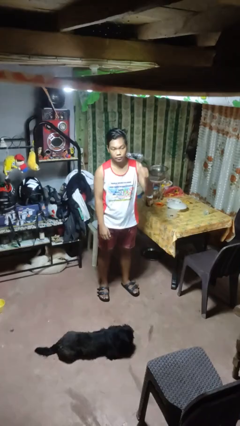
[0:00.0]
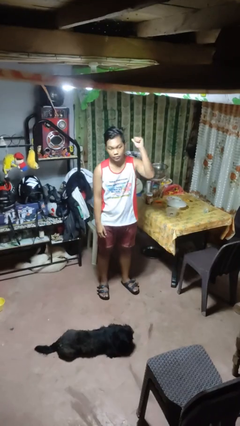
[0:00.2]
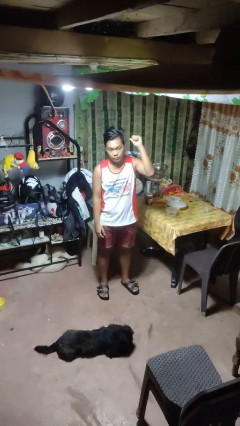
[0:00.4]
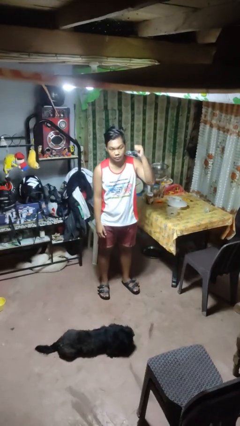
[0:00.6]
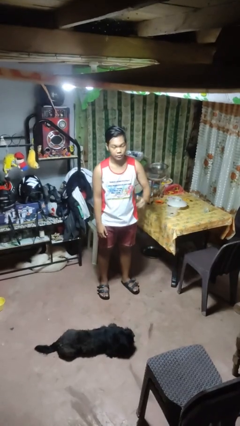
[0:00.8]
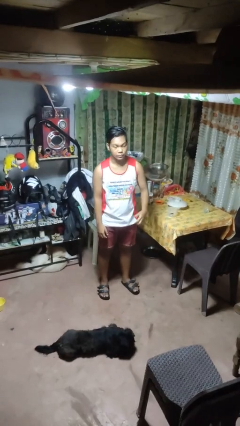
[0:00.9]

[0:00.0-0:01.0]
person gestures behind me

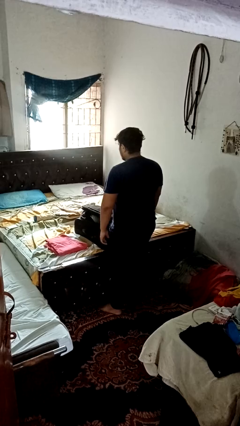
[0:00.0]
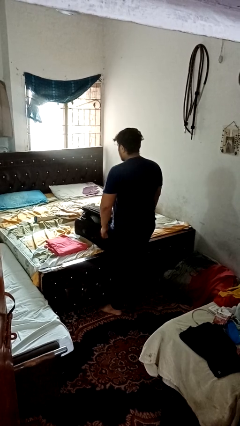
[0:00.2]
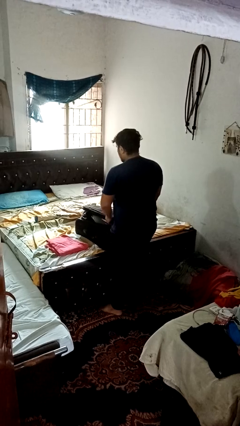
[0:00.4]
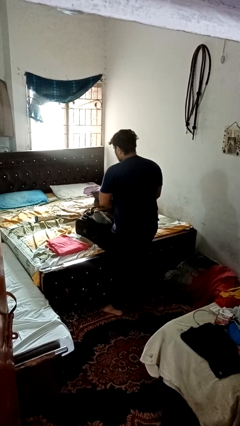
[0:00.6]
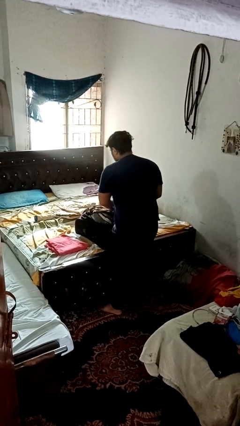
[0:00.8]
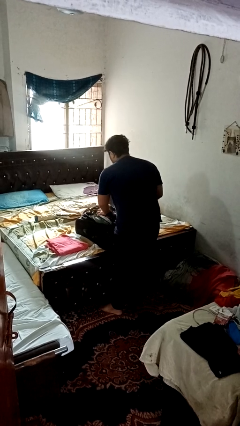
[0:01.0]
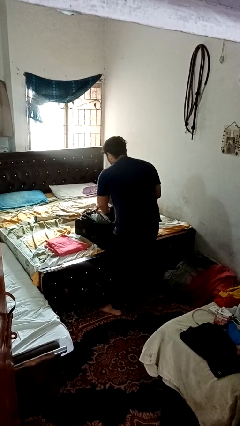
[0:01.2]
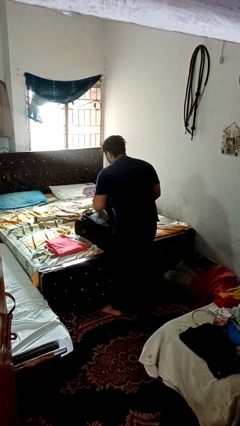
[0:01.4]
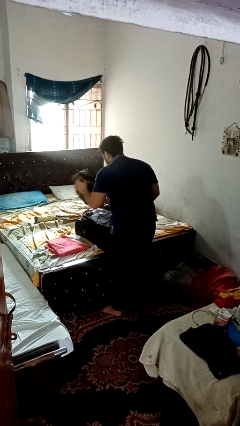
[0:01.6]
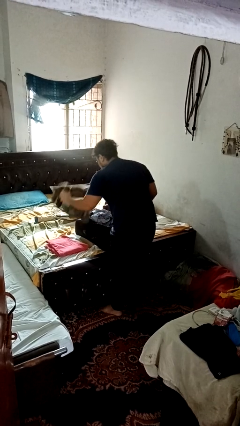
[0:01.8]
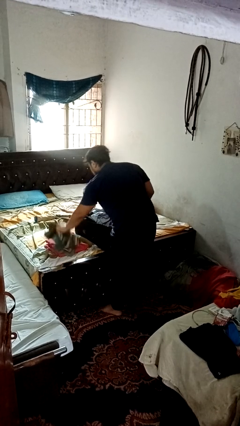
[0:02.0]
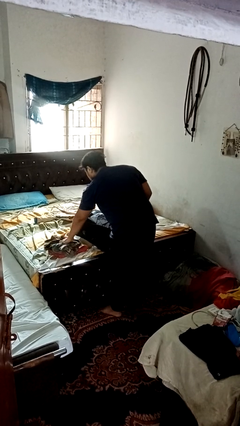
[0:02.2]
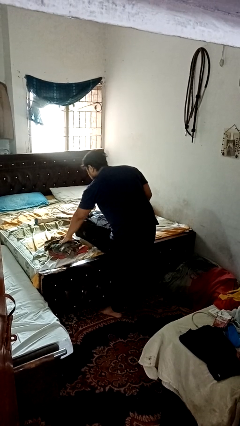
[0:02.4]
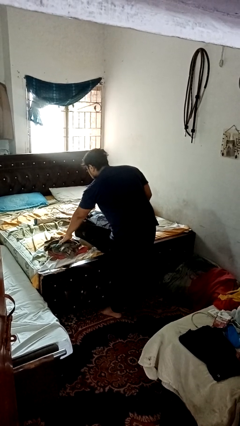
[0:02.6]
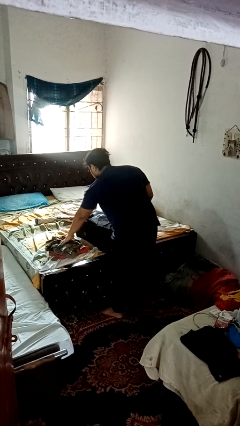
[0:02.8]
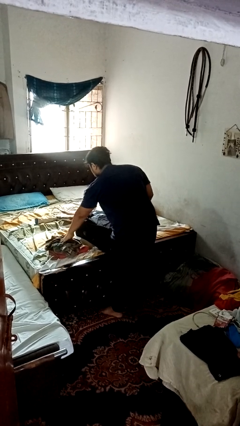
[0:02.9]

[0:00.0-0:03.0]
person unloads clothes from suitcase

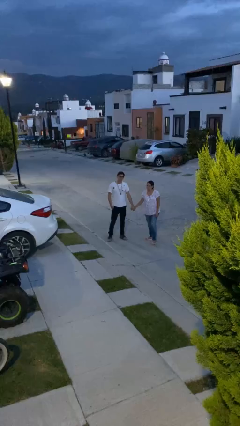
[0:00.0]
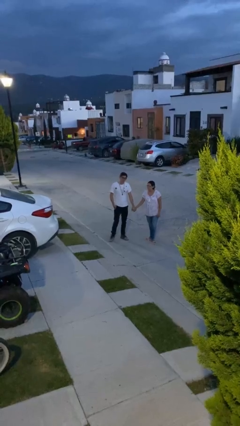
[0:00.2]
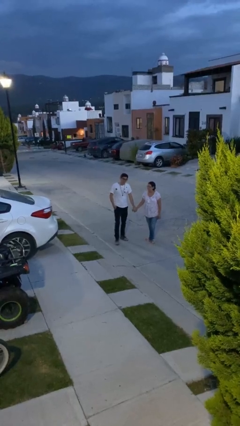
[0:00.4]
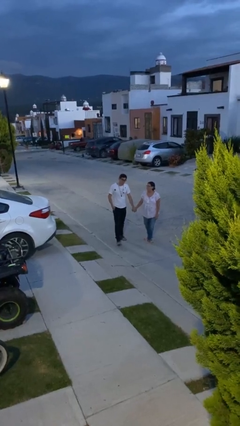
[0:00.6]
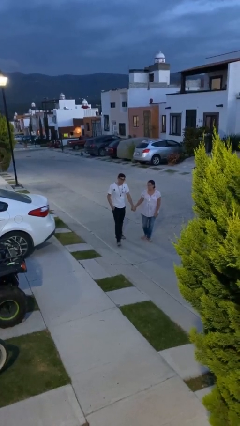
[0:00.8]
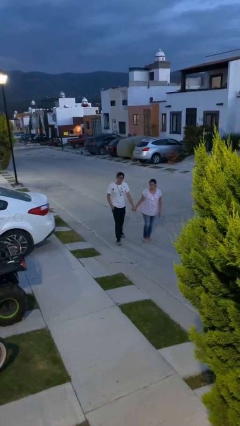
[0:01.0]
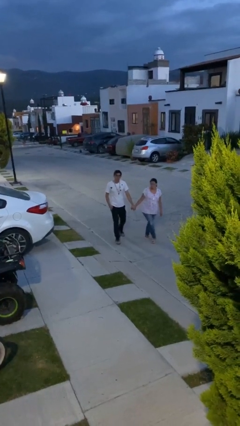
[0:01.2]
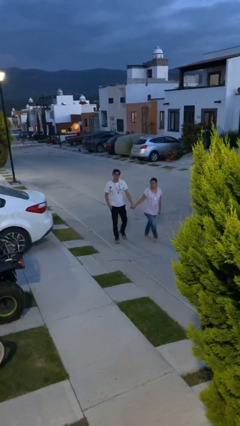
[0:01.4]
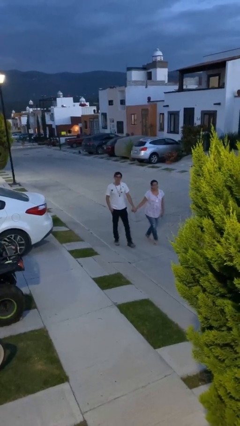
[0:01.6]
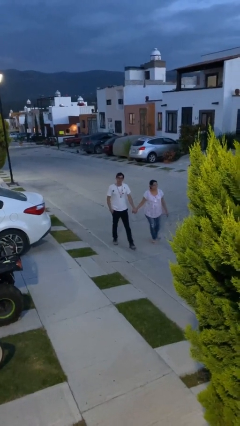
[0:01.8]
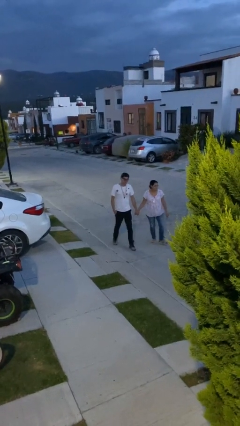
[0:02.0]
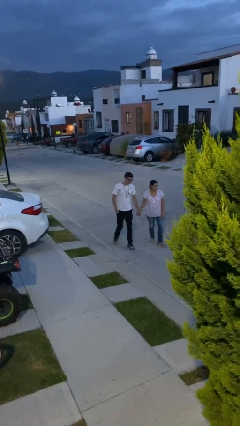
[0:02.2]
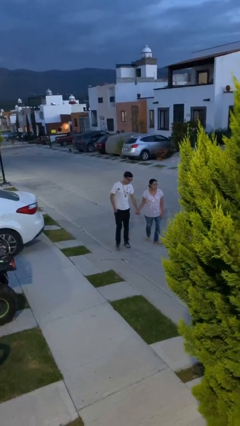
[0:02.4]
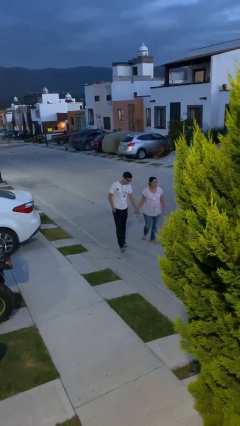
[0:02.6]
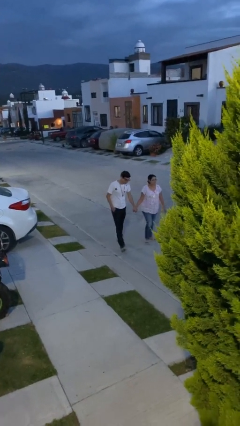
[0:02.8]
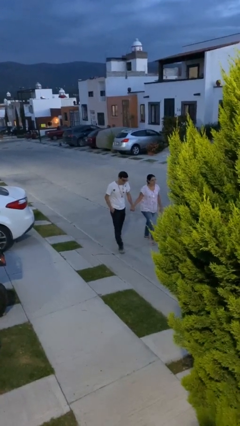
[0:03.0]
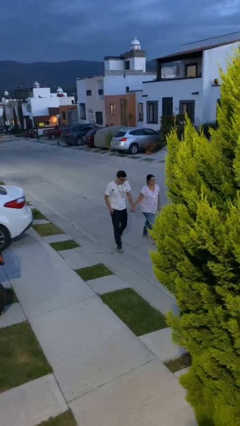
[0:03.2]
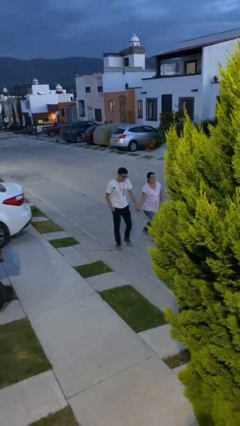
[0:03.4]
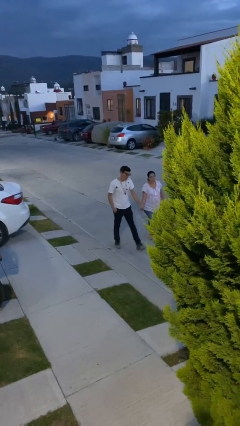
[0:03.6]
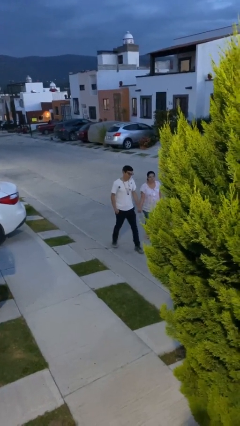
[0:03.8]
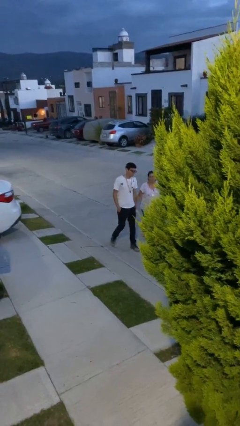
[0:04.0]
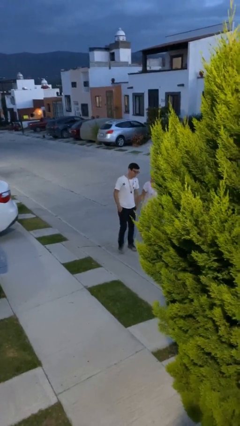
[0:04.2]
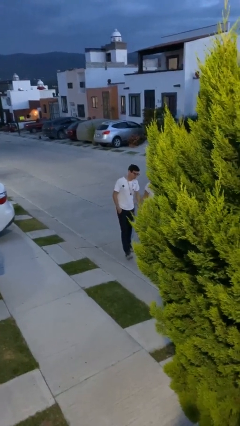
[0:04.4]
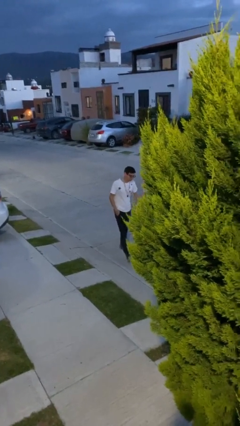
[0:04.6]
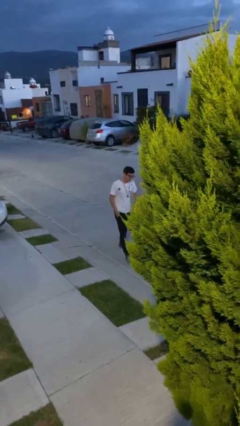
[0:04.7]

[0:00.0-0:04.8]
person holds hand

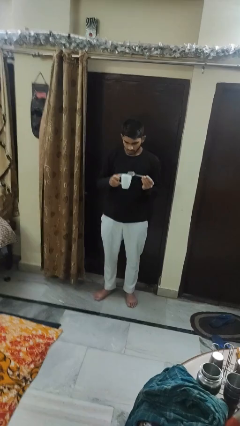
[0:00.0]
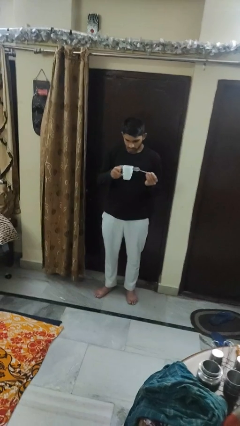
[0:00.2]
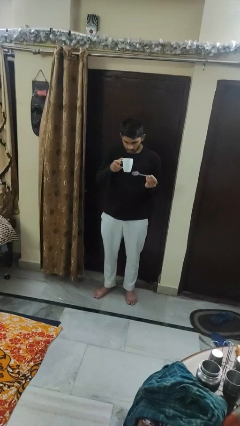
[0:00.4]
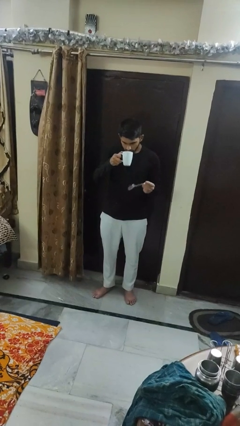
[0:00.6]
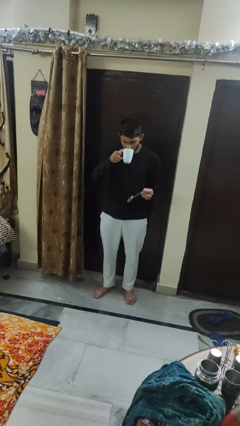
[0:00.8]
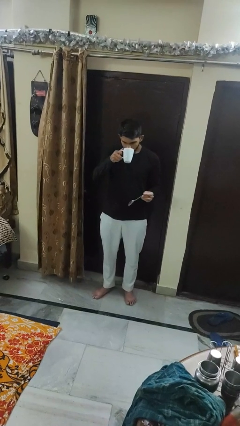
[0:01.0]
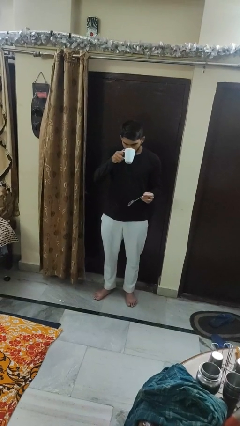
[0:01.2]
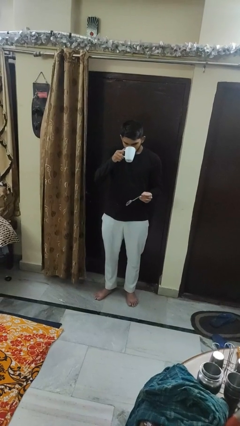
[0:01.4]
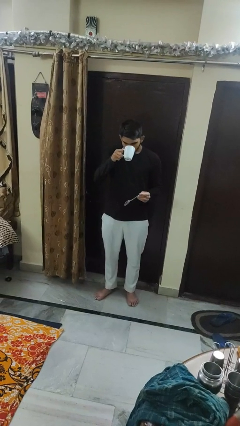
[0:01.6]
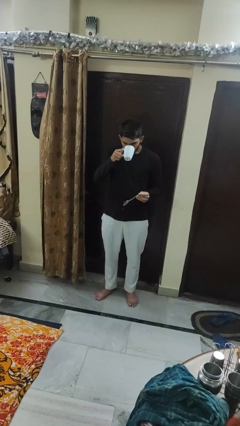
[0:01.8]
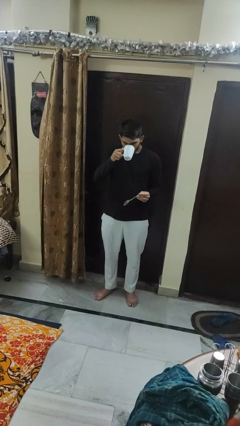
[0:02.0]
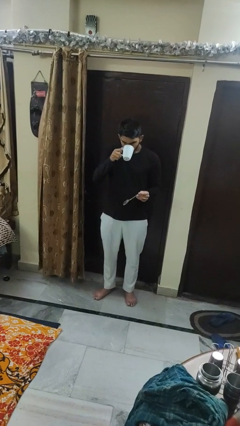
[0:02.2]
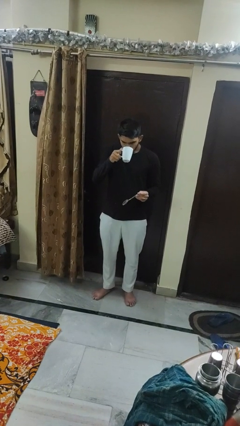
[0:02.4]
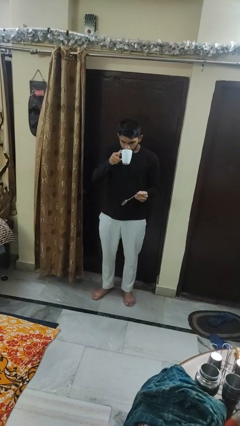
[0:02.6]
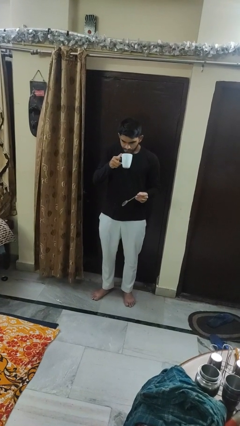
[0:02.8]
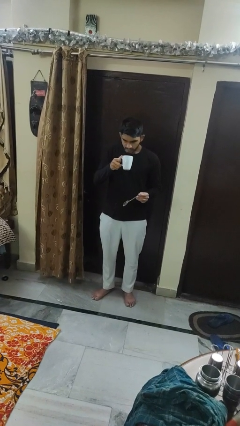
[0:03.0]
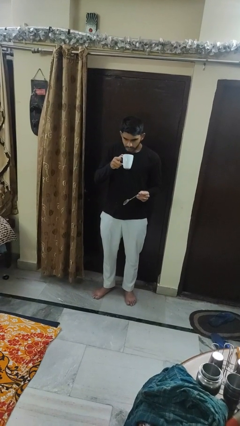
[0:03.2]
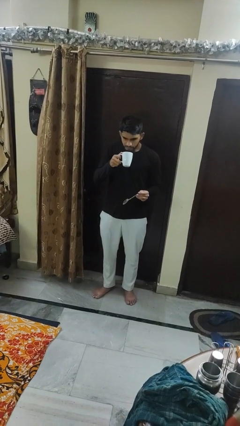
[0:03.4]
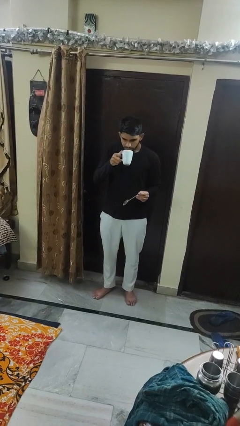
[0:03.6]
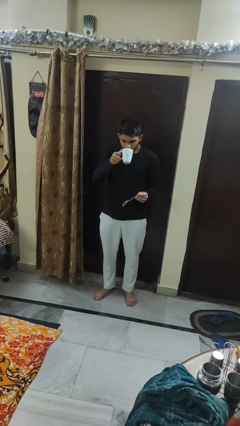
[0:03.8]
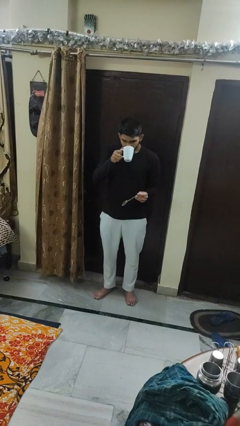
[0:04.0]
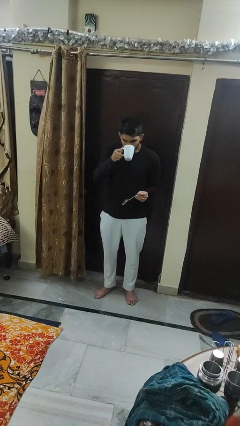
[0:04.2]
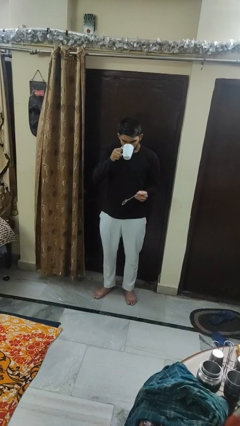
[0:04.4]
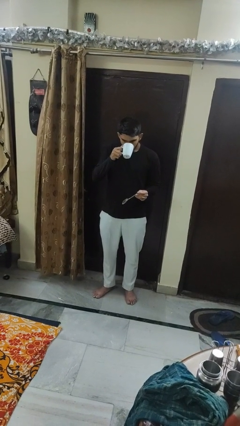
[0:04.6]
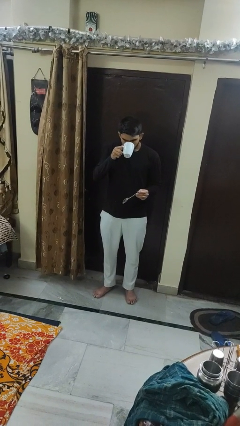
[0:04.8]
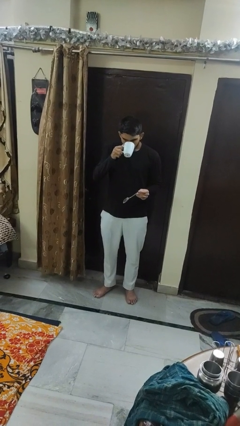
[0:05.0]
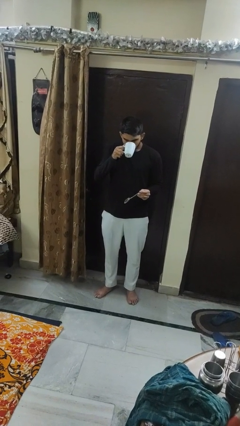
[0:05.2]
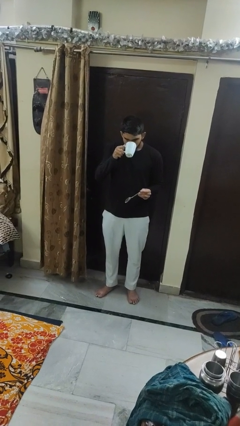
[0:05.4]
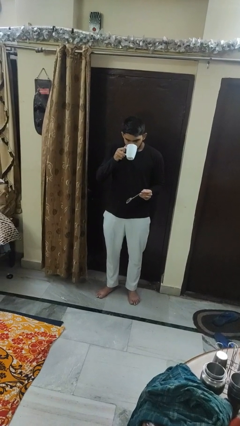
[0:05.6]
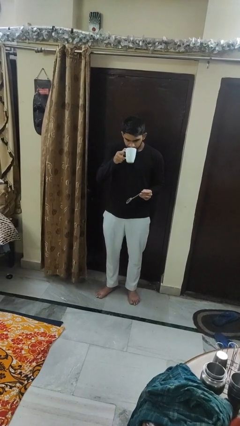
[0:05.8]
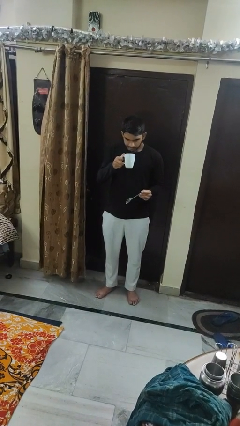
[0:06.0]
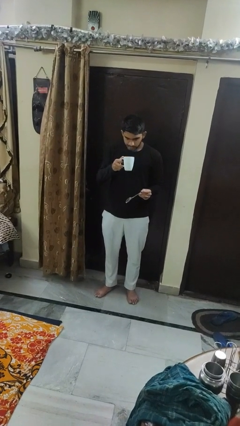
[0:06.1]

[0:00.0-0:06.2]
person drinks from mug

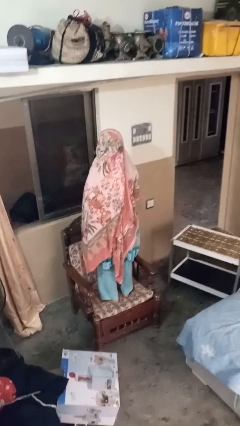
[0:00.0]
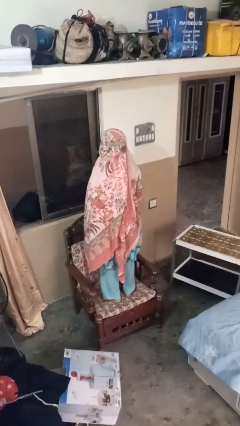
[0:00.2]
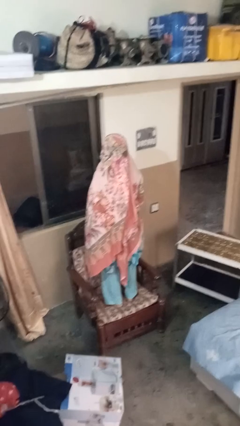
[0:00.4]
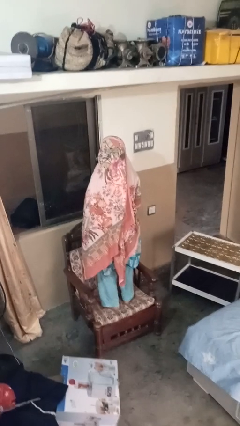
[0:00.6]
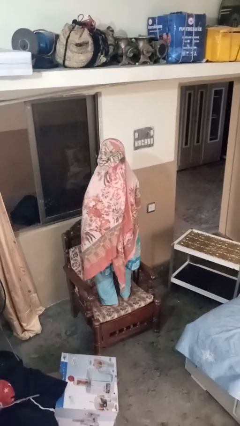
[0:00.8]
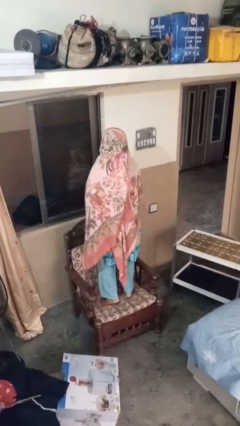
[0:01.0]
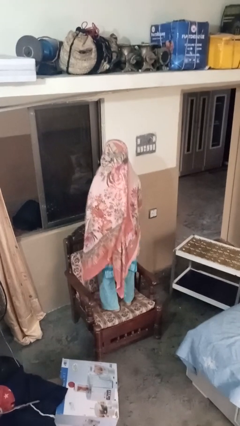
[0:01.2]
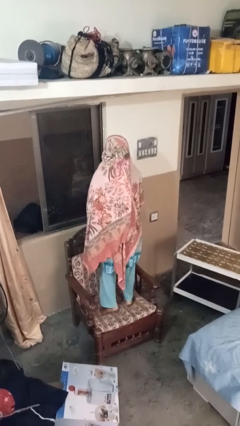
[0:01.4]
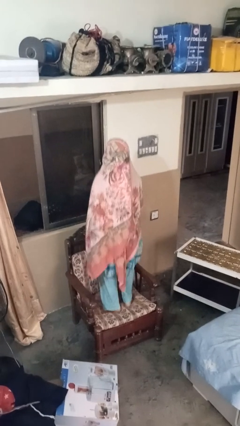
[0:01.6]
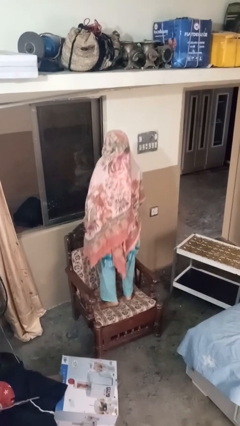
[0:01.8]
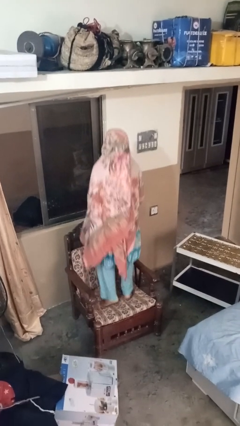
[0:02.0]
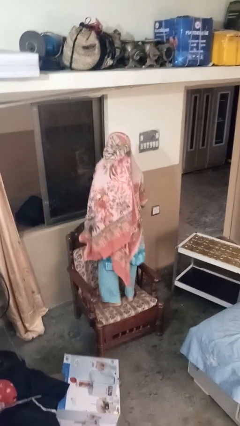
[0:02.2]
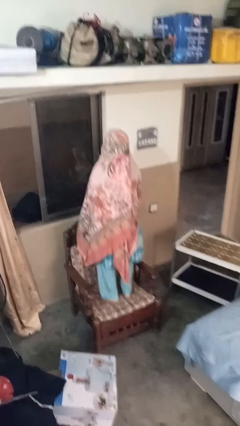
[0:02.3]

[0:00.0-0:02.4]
person jumps on couch

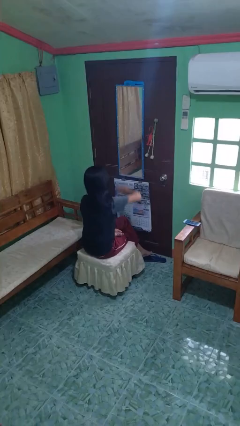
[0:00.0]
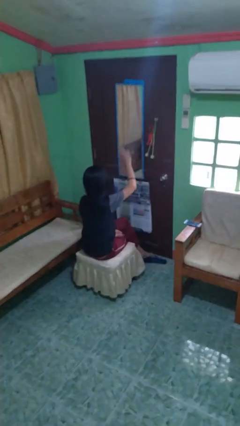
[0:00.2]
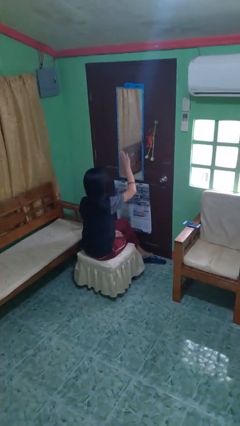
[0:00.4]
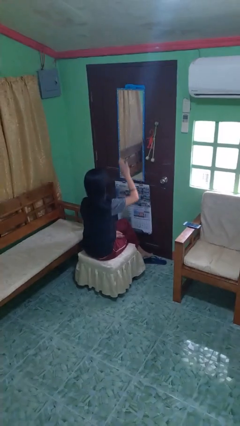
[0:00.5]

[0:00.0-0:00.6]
person gestures swipe down
